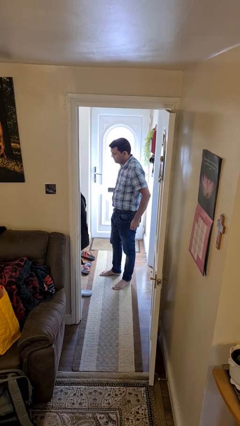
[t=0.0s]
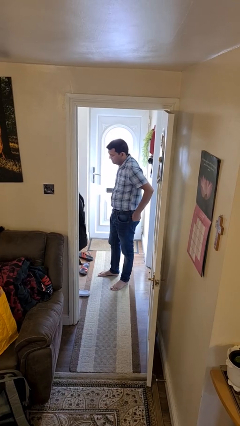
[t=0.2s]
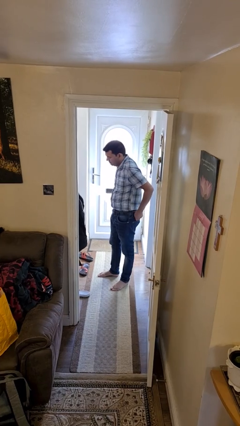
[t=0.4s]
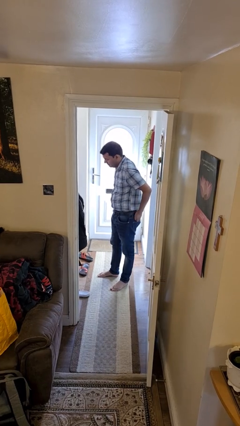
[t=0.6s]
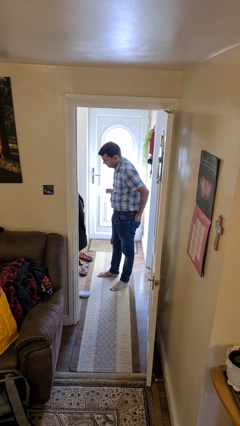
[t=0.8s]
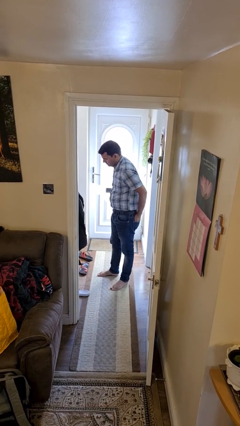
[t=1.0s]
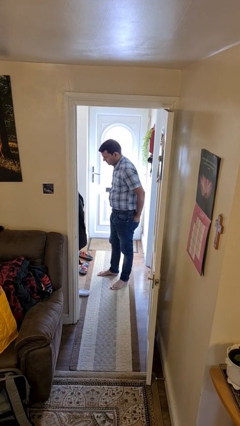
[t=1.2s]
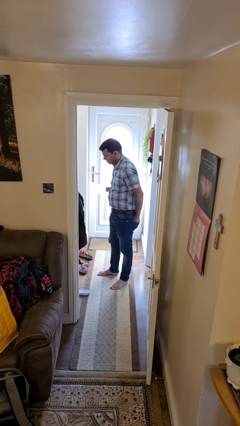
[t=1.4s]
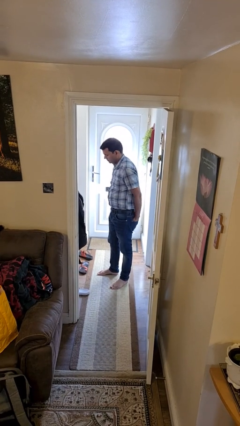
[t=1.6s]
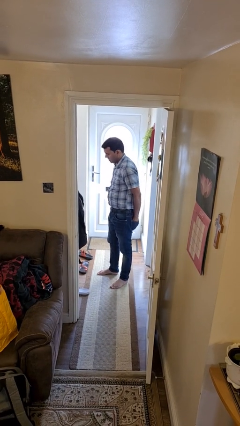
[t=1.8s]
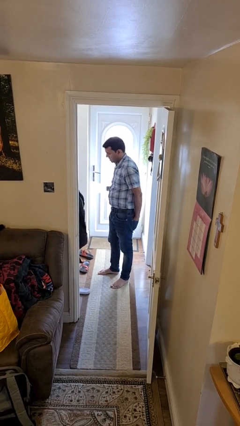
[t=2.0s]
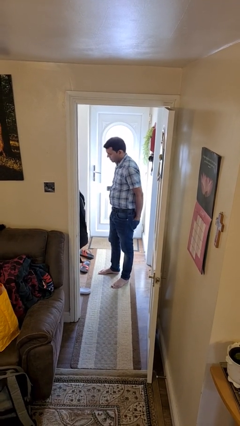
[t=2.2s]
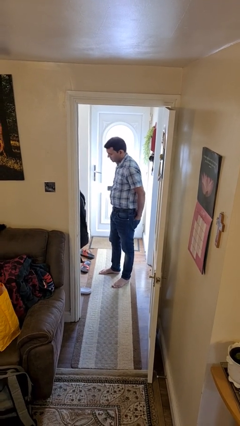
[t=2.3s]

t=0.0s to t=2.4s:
person puts hands in back pockets

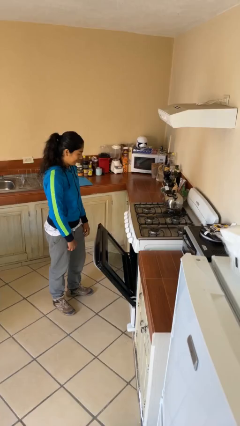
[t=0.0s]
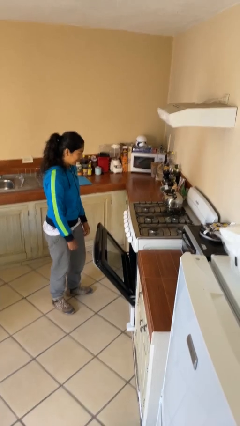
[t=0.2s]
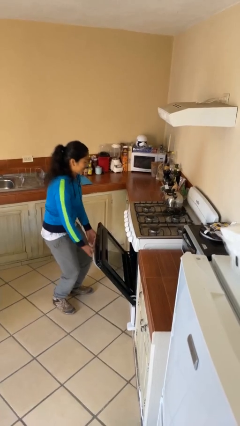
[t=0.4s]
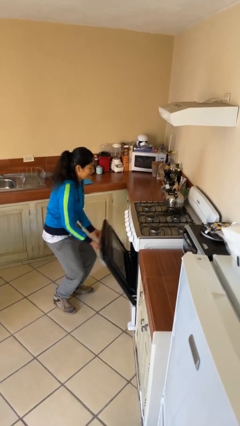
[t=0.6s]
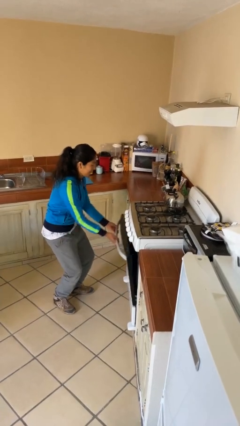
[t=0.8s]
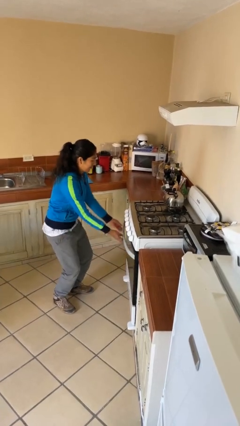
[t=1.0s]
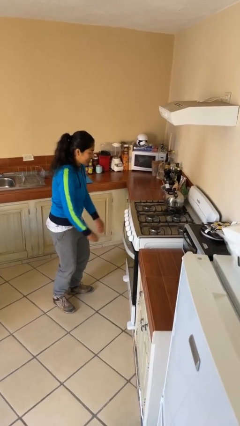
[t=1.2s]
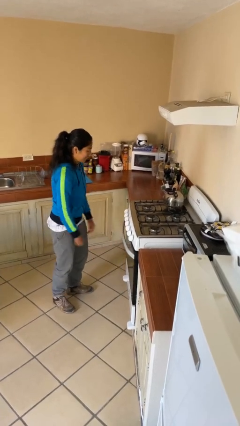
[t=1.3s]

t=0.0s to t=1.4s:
person closes oven door

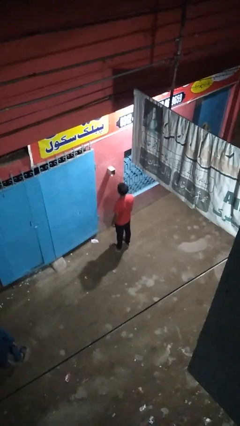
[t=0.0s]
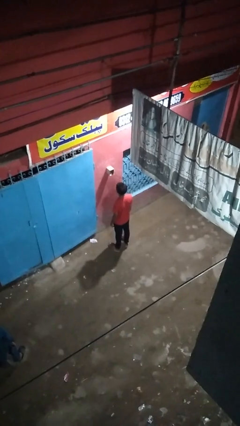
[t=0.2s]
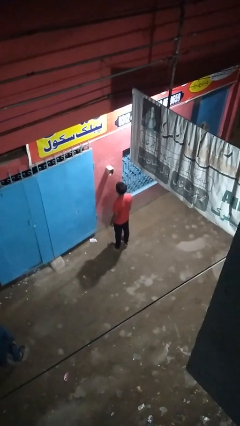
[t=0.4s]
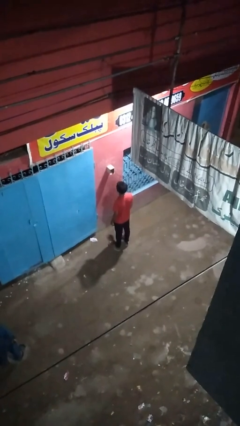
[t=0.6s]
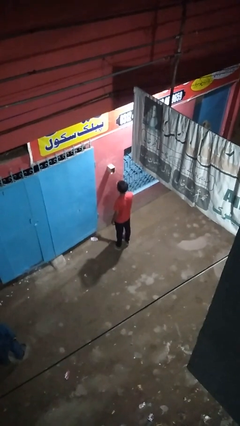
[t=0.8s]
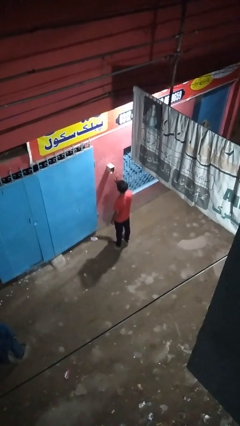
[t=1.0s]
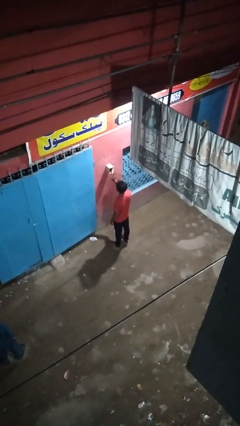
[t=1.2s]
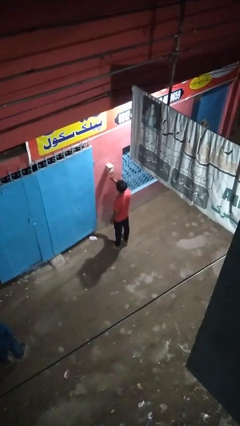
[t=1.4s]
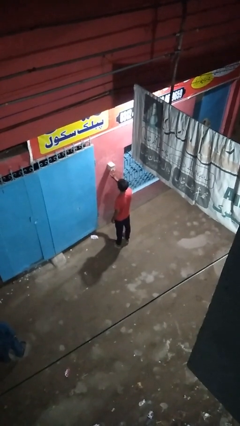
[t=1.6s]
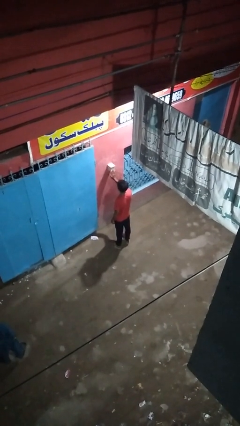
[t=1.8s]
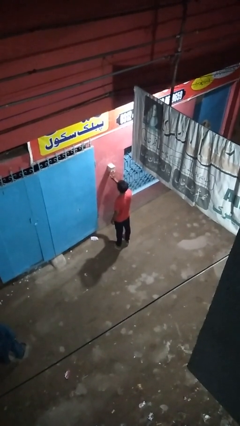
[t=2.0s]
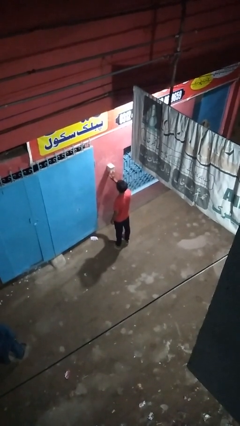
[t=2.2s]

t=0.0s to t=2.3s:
person closes mailbox

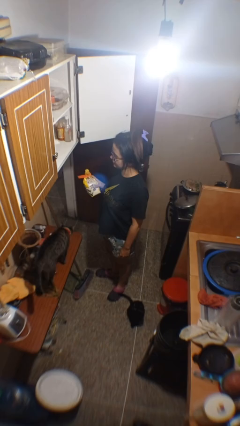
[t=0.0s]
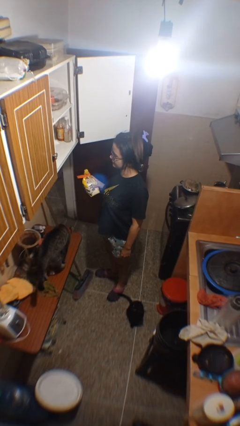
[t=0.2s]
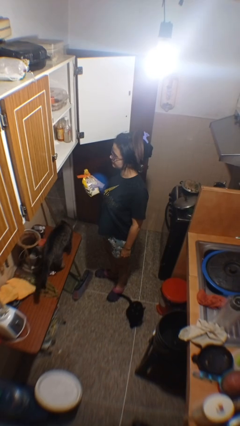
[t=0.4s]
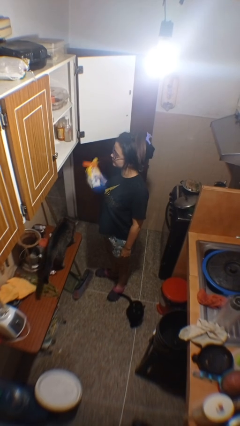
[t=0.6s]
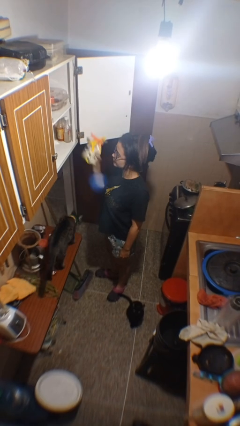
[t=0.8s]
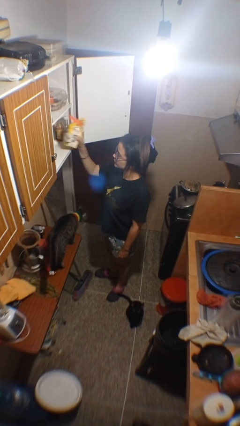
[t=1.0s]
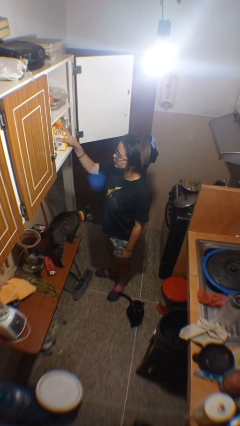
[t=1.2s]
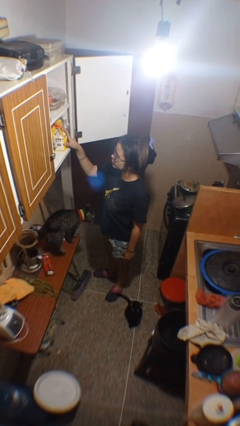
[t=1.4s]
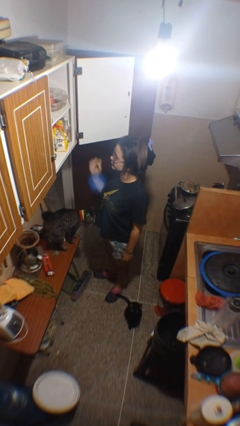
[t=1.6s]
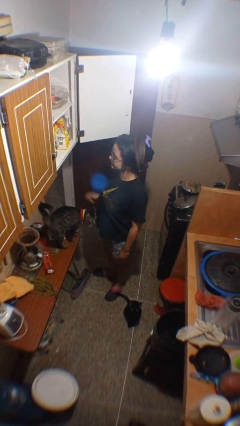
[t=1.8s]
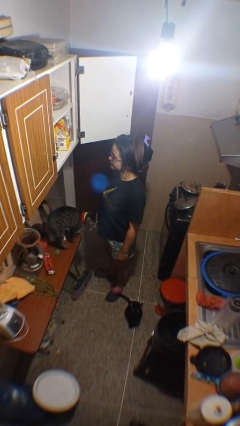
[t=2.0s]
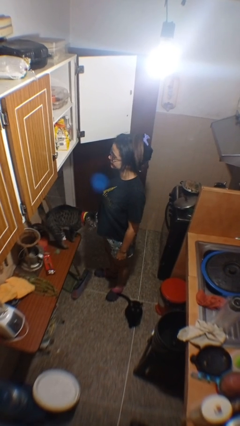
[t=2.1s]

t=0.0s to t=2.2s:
person puts down object into cabinet

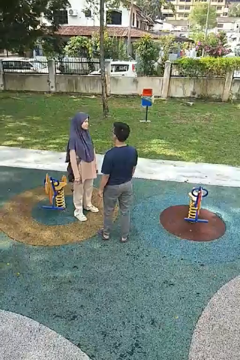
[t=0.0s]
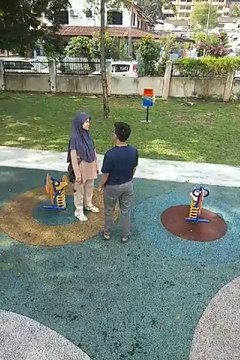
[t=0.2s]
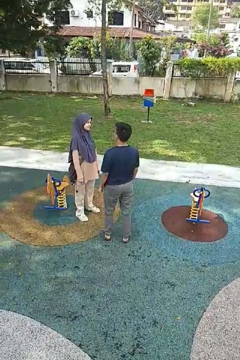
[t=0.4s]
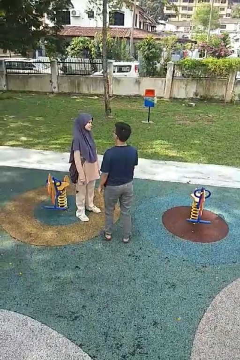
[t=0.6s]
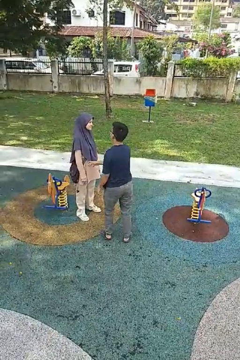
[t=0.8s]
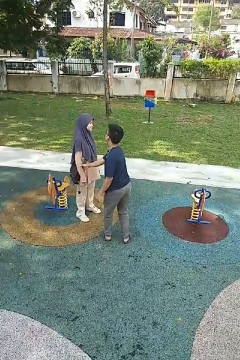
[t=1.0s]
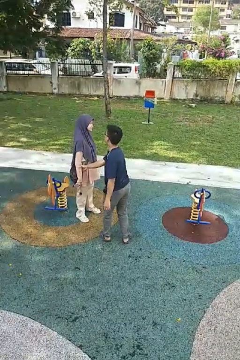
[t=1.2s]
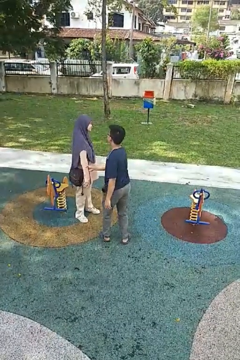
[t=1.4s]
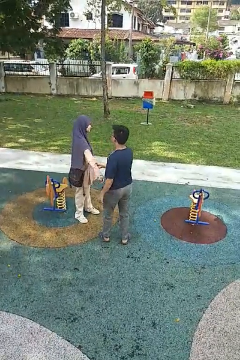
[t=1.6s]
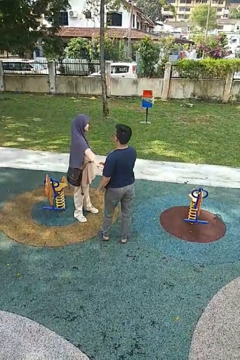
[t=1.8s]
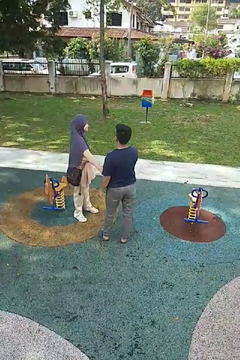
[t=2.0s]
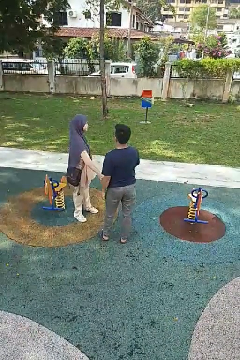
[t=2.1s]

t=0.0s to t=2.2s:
person grabs person by forearm

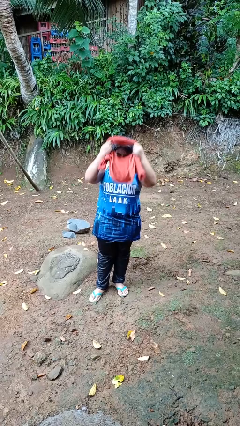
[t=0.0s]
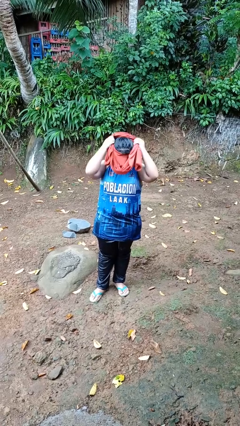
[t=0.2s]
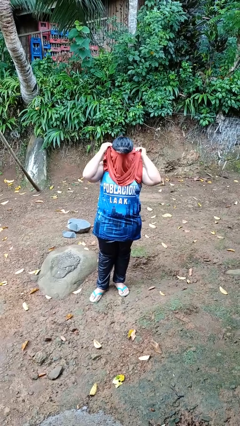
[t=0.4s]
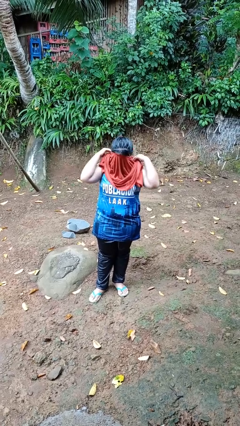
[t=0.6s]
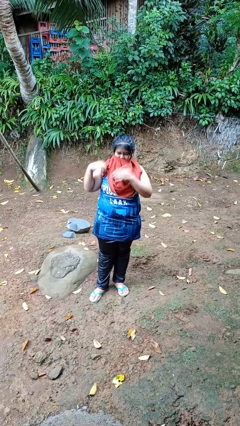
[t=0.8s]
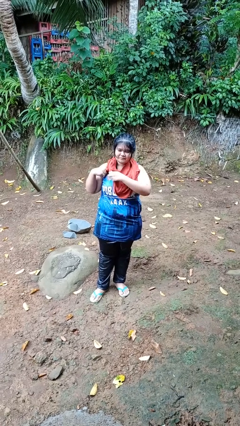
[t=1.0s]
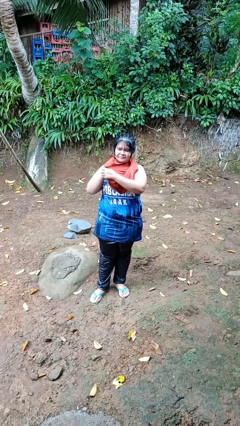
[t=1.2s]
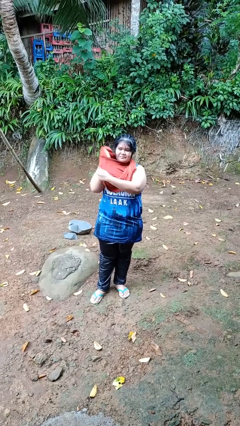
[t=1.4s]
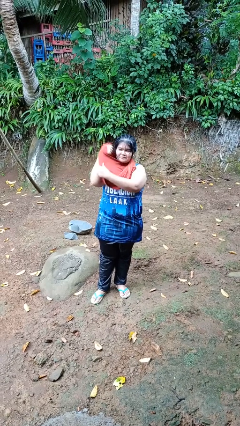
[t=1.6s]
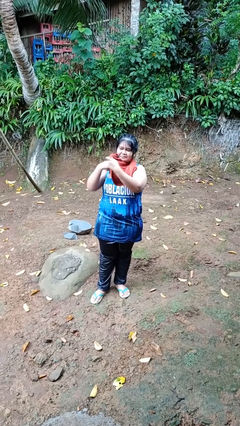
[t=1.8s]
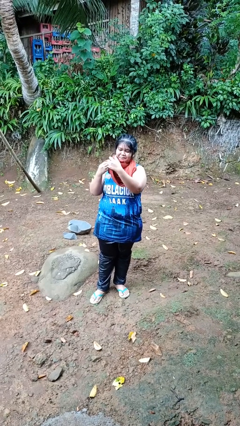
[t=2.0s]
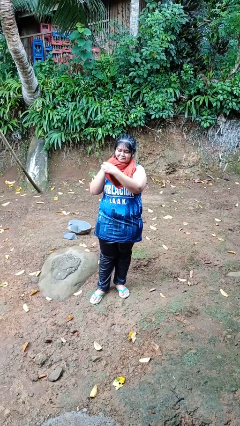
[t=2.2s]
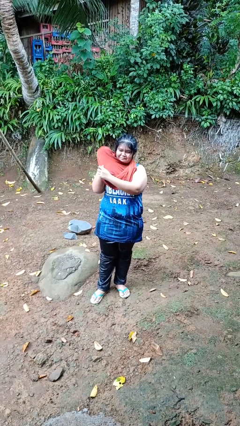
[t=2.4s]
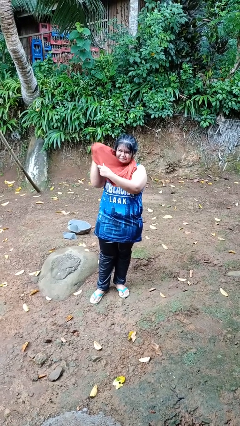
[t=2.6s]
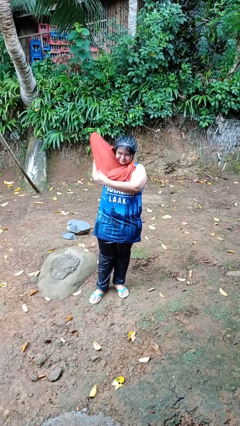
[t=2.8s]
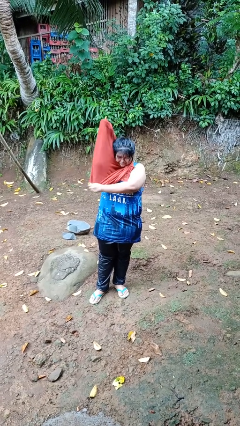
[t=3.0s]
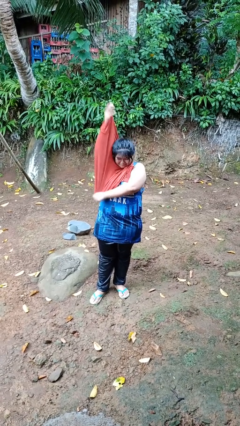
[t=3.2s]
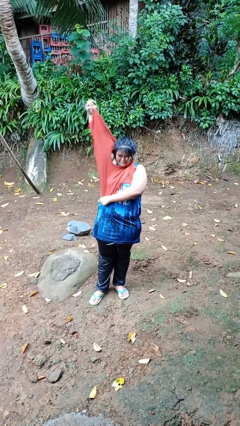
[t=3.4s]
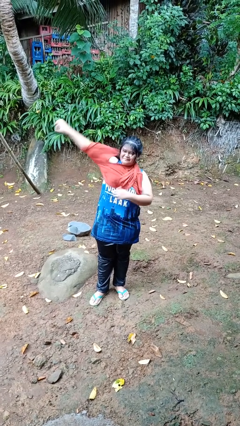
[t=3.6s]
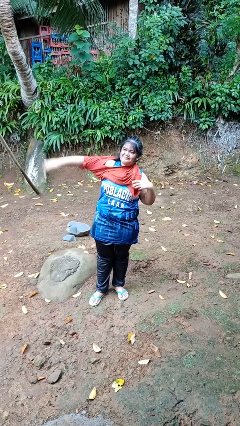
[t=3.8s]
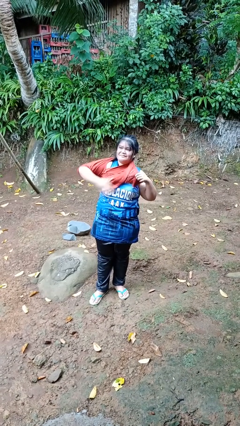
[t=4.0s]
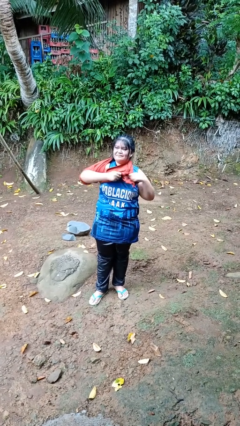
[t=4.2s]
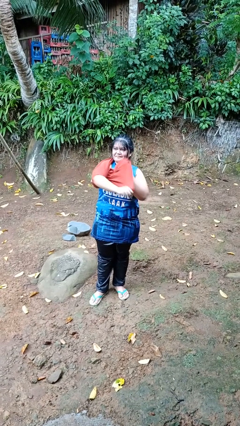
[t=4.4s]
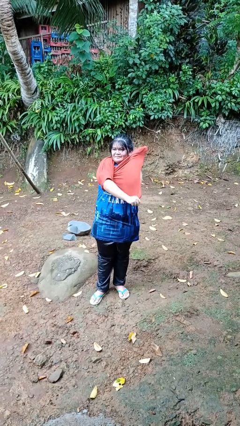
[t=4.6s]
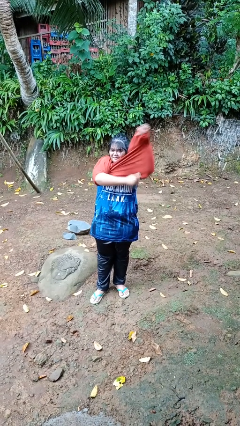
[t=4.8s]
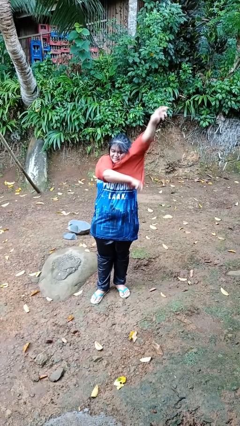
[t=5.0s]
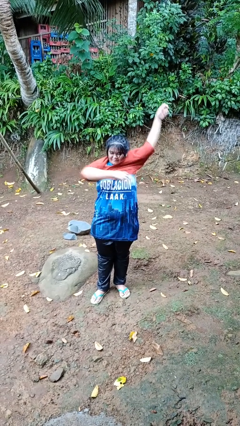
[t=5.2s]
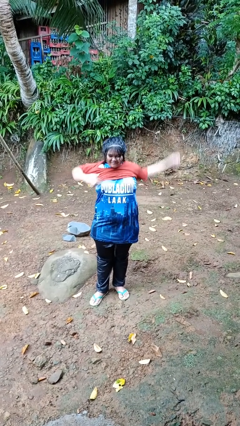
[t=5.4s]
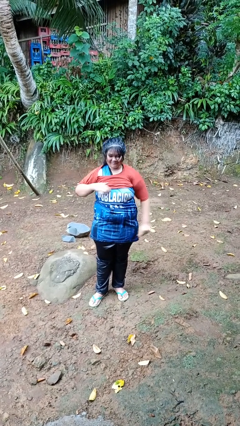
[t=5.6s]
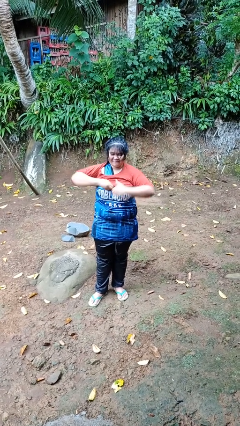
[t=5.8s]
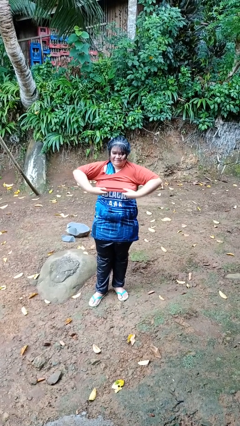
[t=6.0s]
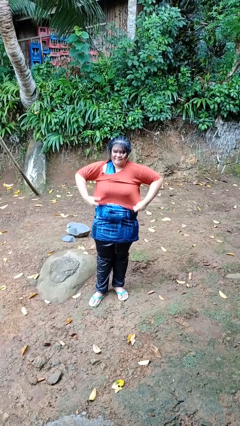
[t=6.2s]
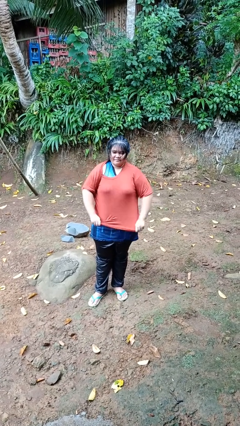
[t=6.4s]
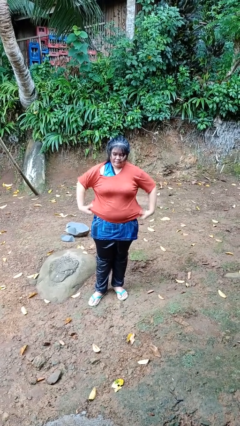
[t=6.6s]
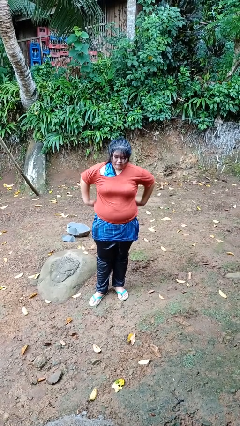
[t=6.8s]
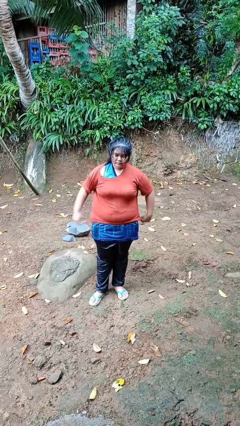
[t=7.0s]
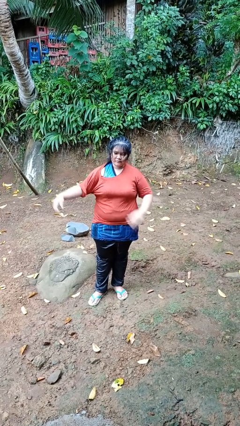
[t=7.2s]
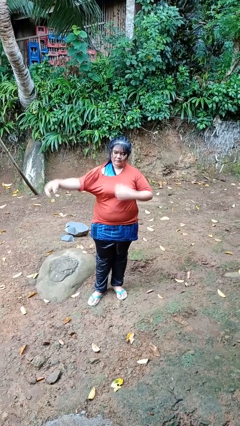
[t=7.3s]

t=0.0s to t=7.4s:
person puts on shirt
